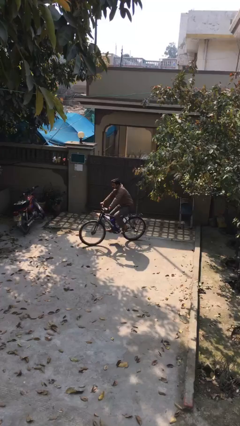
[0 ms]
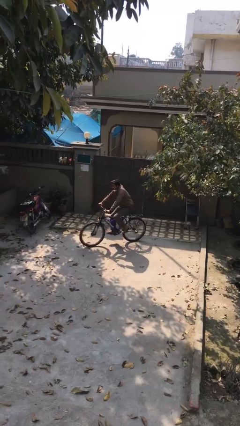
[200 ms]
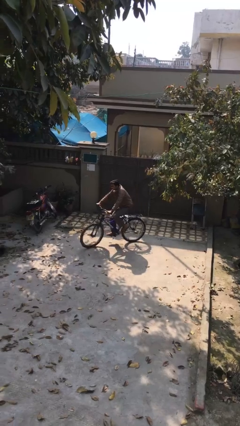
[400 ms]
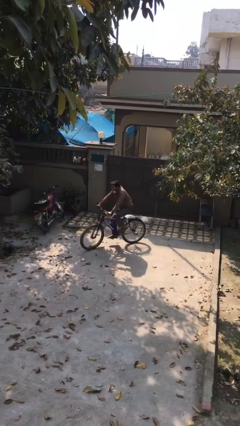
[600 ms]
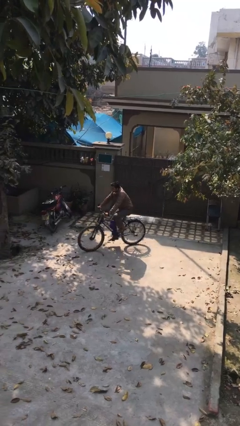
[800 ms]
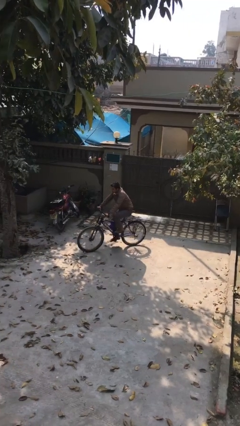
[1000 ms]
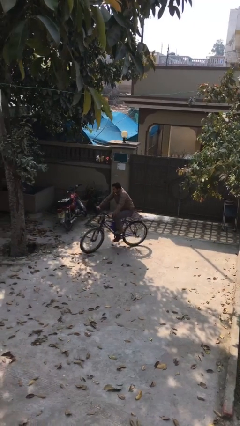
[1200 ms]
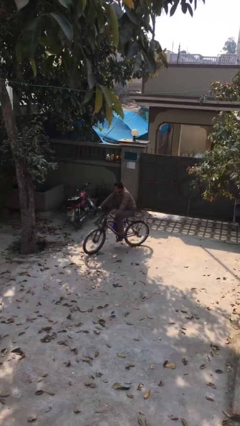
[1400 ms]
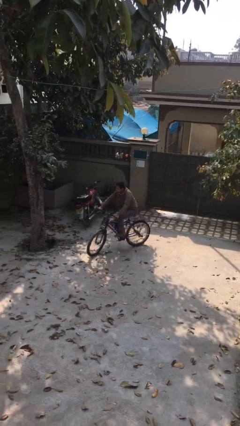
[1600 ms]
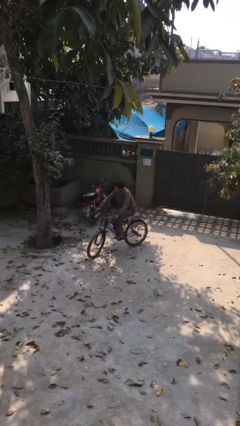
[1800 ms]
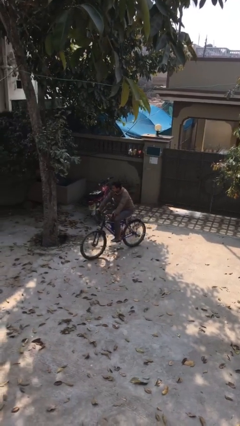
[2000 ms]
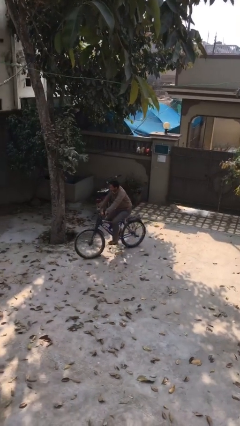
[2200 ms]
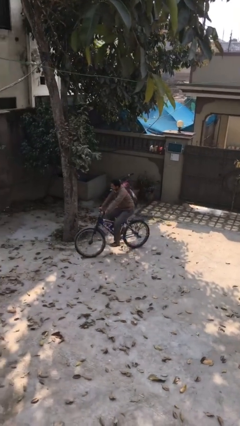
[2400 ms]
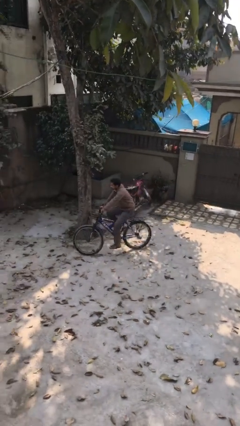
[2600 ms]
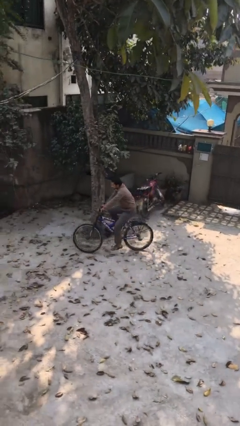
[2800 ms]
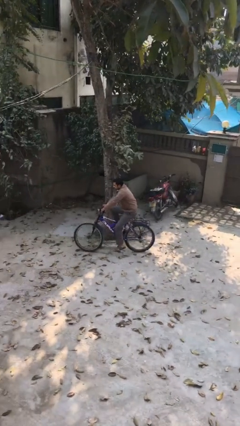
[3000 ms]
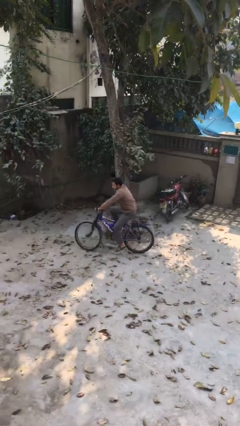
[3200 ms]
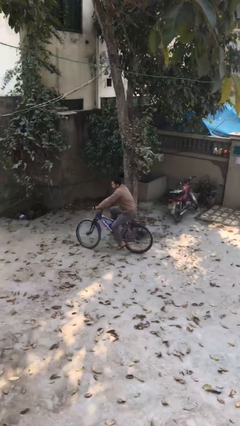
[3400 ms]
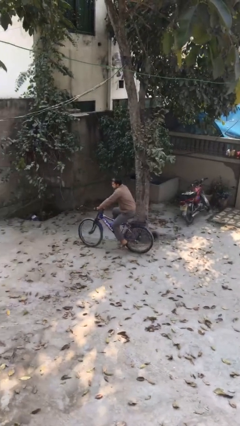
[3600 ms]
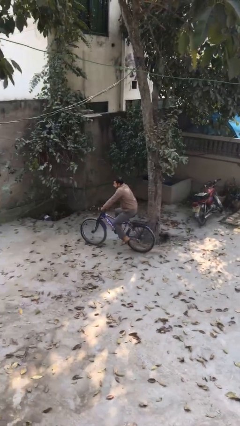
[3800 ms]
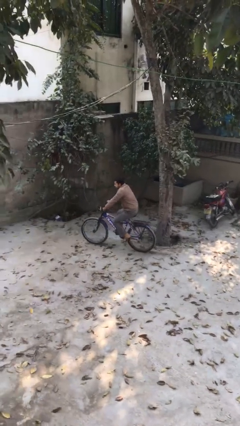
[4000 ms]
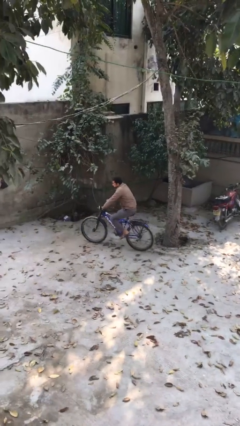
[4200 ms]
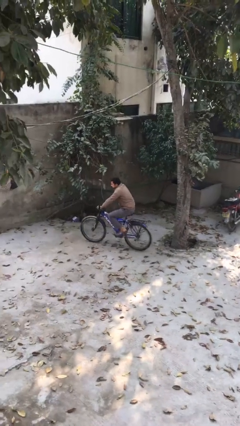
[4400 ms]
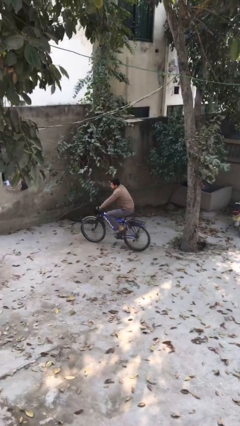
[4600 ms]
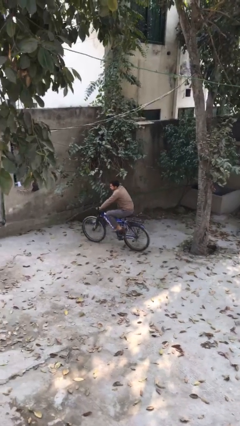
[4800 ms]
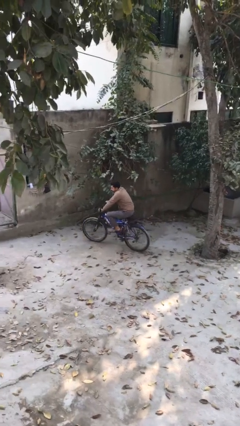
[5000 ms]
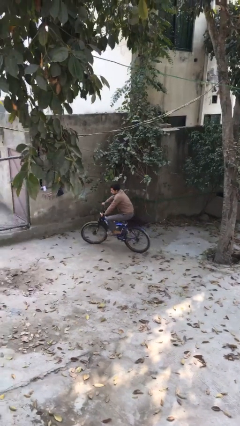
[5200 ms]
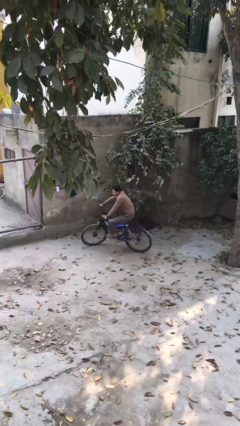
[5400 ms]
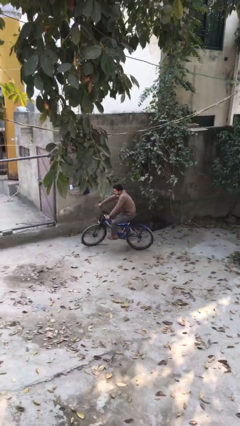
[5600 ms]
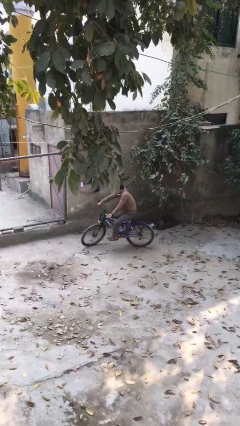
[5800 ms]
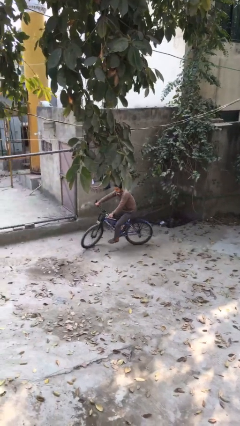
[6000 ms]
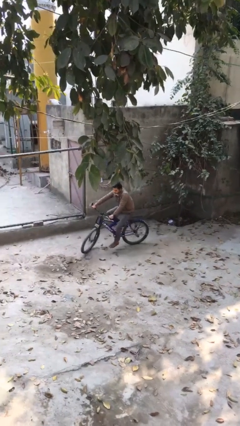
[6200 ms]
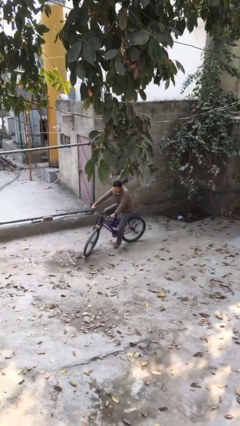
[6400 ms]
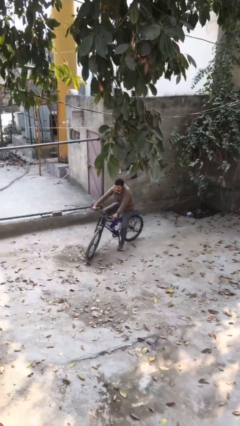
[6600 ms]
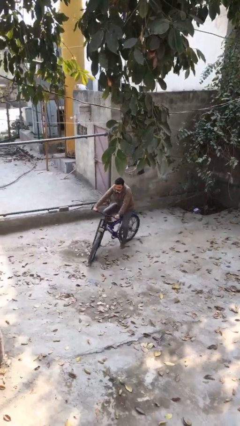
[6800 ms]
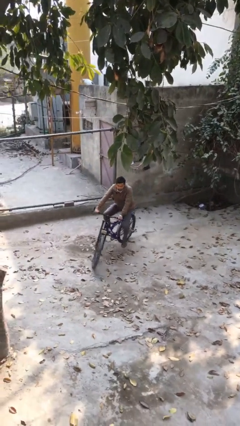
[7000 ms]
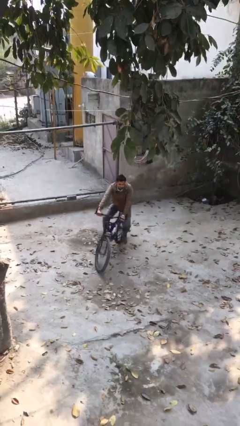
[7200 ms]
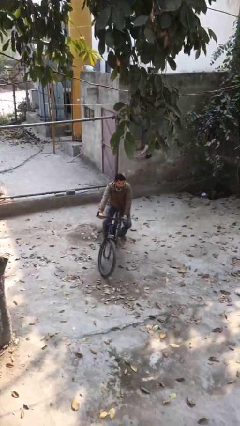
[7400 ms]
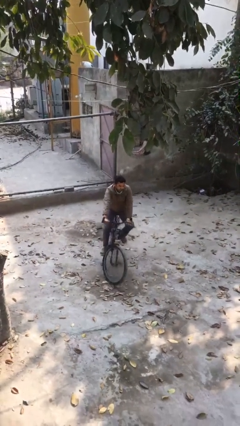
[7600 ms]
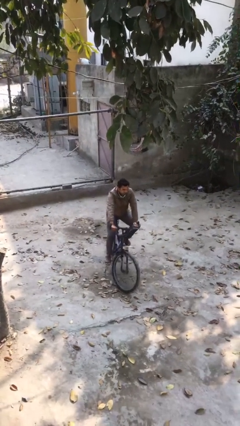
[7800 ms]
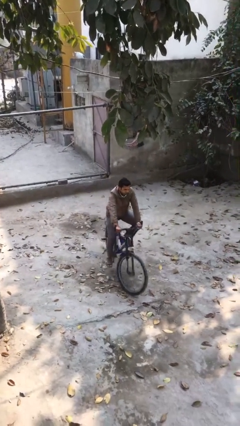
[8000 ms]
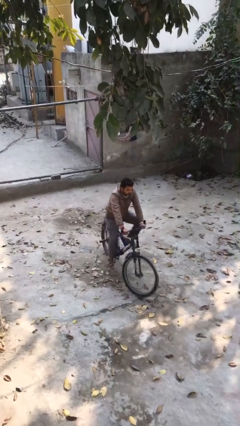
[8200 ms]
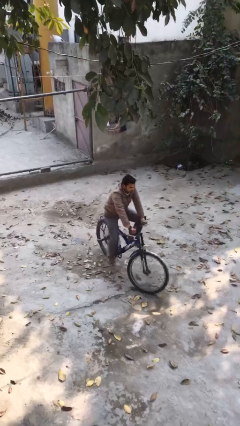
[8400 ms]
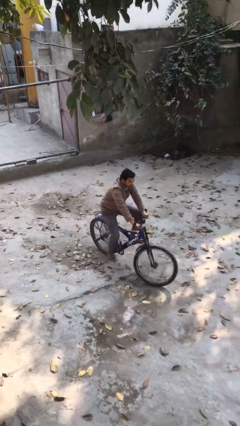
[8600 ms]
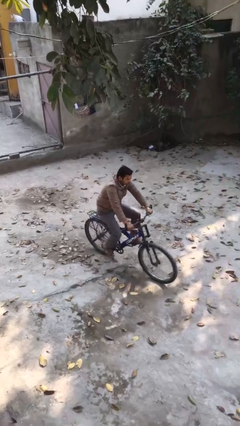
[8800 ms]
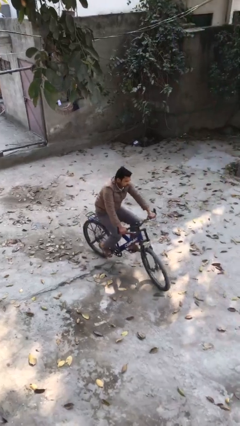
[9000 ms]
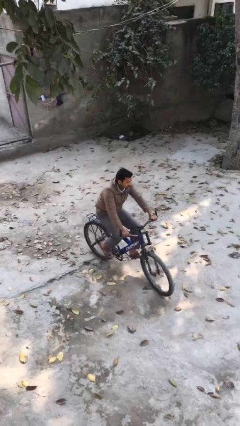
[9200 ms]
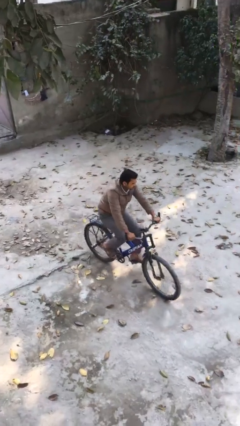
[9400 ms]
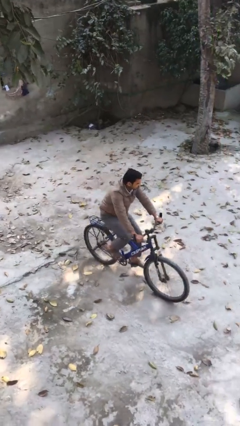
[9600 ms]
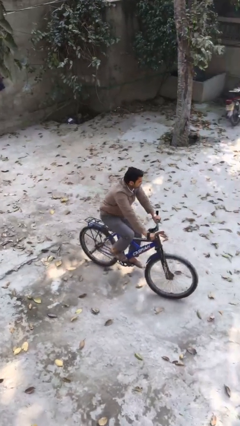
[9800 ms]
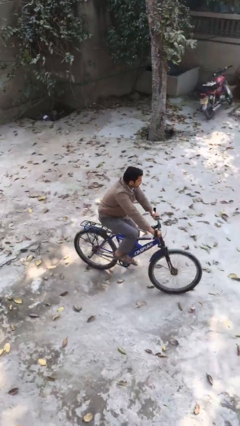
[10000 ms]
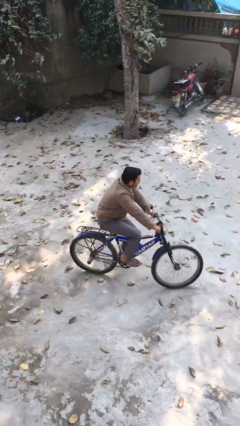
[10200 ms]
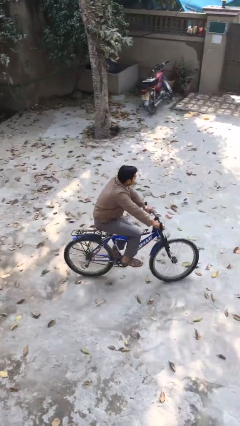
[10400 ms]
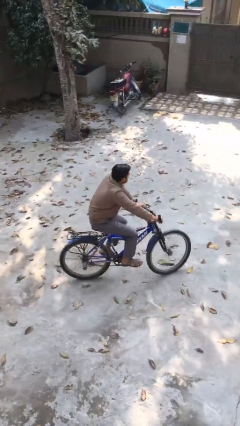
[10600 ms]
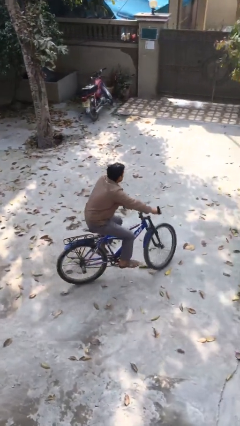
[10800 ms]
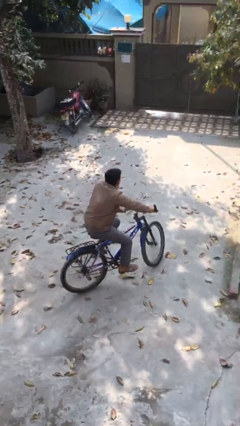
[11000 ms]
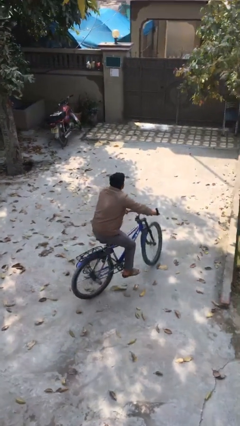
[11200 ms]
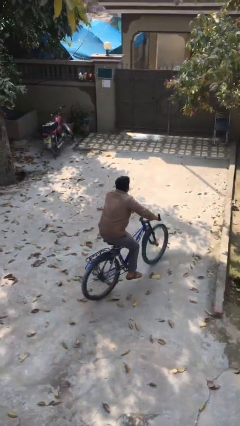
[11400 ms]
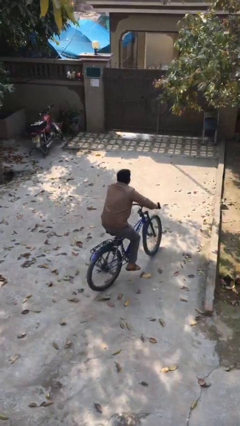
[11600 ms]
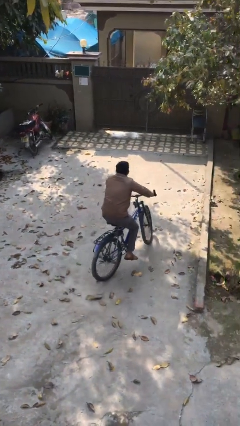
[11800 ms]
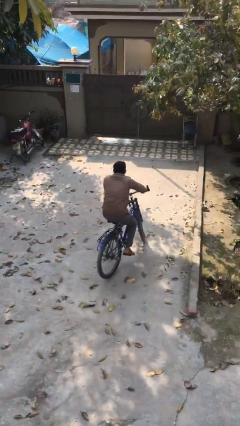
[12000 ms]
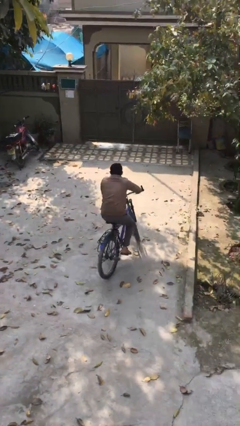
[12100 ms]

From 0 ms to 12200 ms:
person rides bicycle

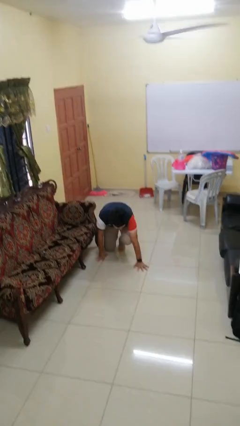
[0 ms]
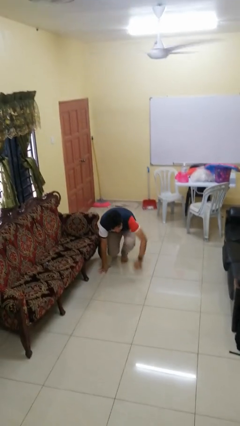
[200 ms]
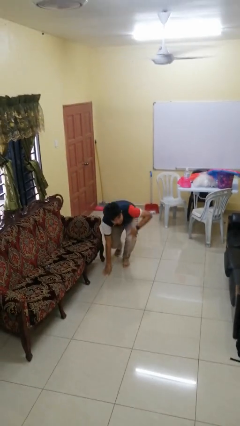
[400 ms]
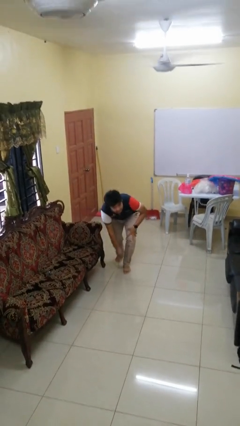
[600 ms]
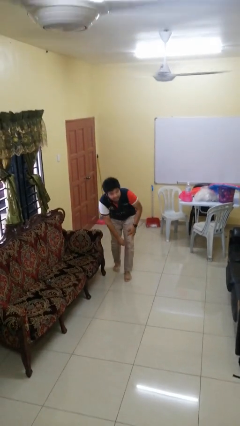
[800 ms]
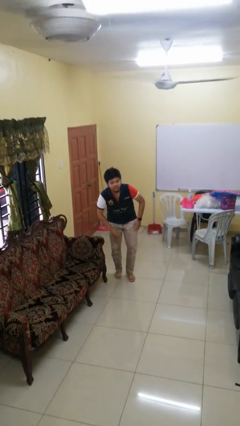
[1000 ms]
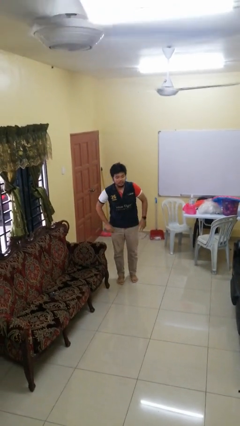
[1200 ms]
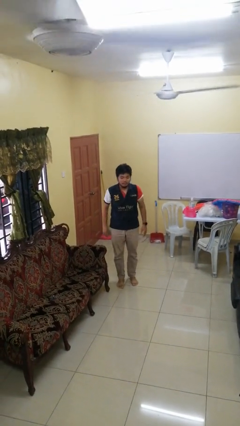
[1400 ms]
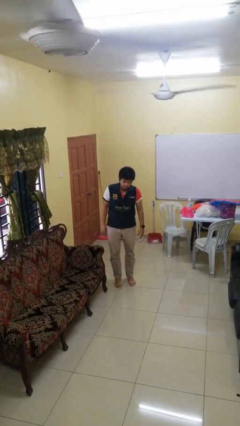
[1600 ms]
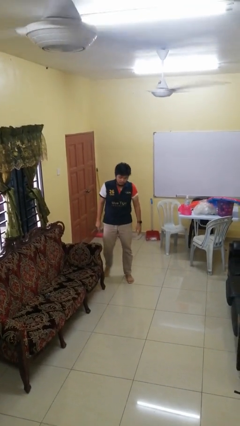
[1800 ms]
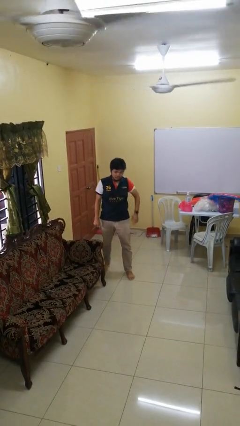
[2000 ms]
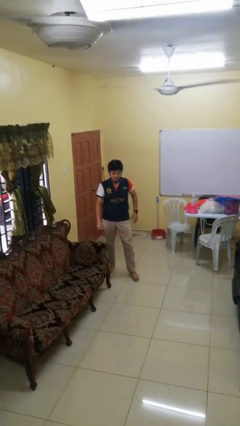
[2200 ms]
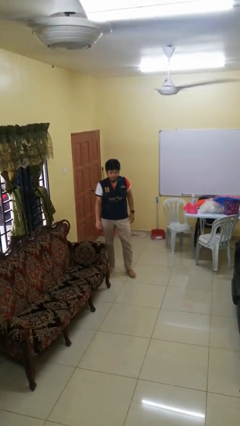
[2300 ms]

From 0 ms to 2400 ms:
person stands up from floor

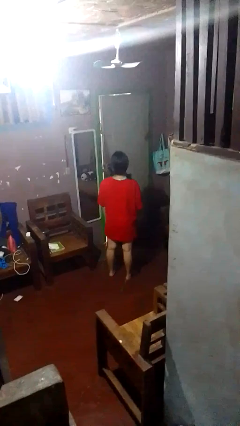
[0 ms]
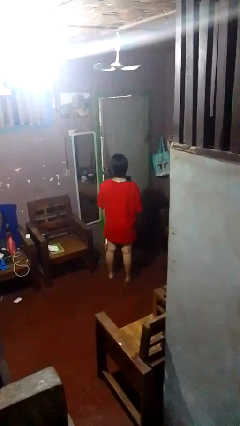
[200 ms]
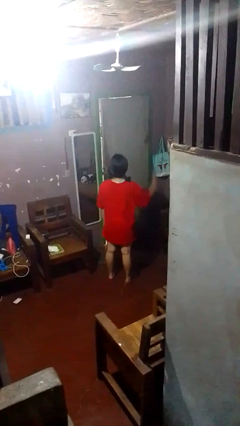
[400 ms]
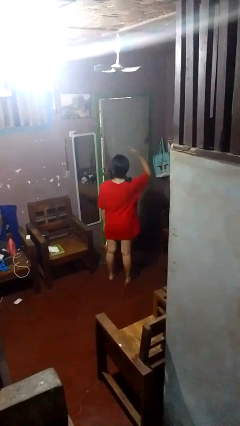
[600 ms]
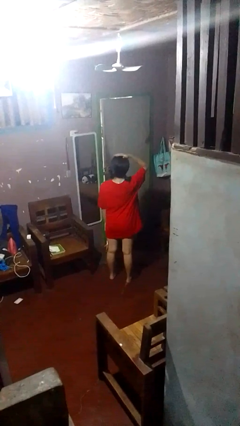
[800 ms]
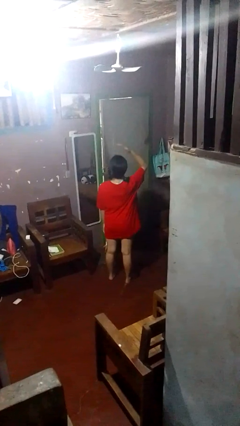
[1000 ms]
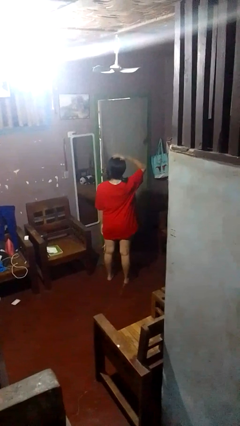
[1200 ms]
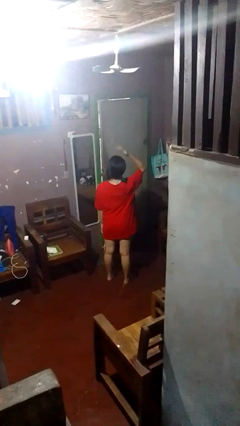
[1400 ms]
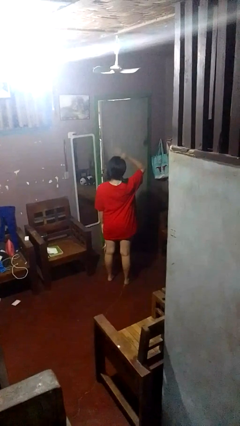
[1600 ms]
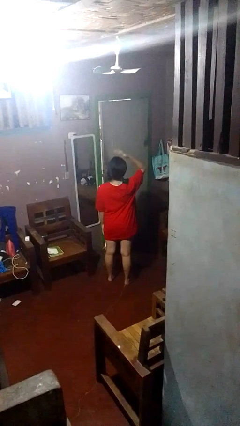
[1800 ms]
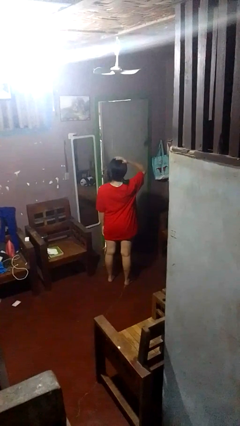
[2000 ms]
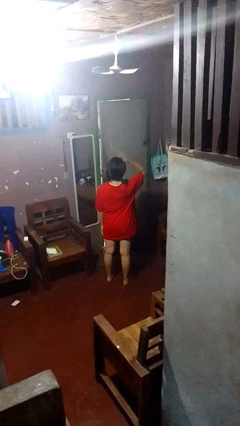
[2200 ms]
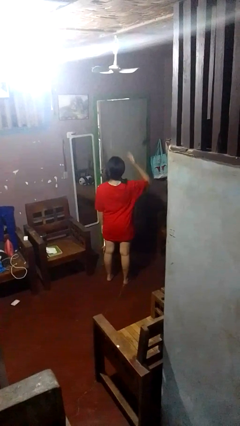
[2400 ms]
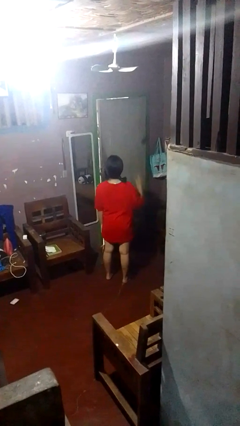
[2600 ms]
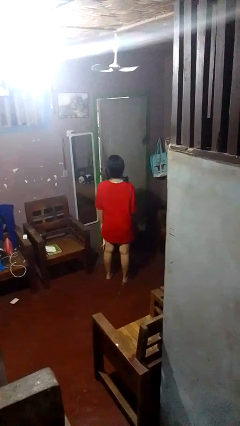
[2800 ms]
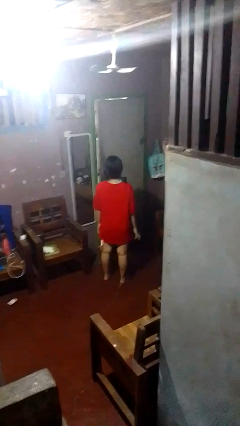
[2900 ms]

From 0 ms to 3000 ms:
person pats head

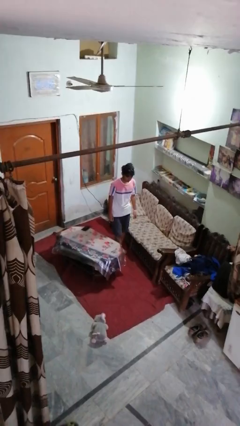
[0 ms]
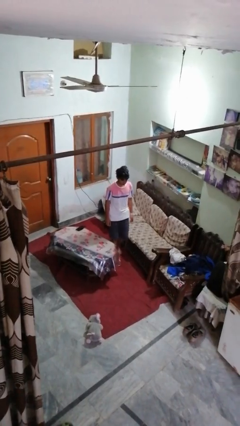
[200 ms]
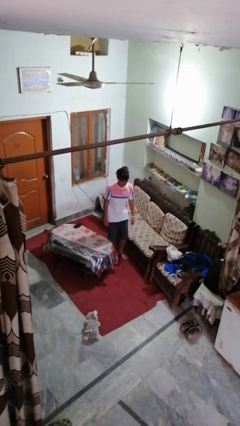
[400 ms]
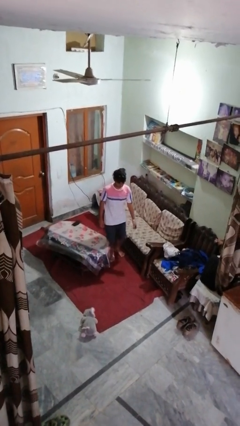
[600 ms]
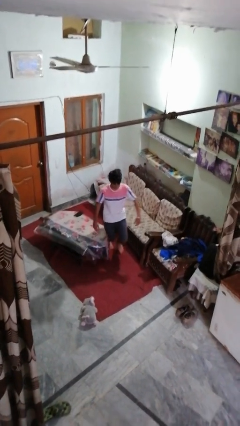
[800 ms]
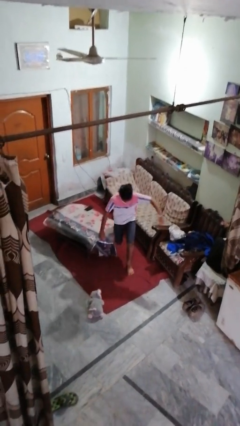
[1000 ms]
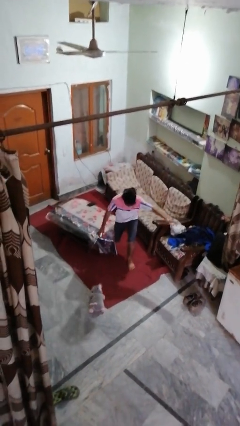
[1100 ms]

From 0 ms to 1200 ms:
person trips on object on floor
